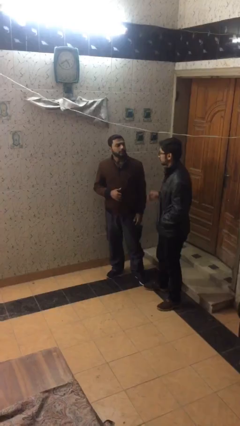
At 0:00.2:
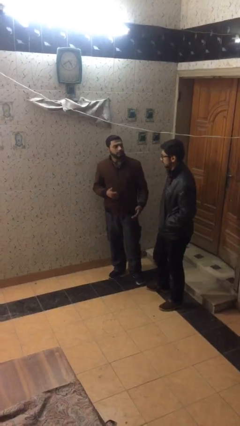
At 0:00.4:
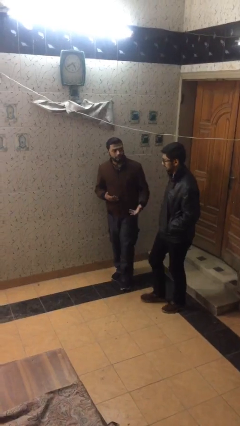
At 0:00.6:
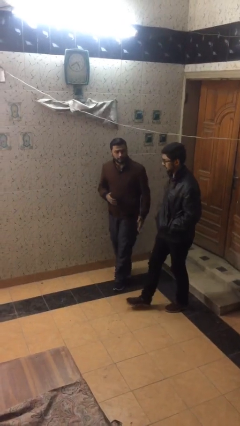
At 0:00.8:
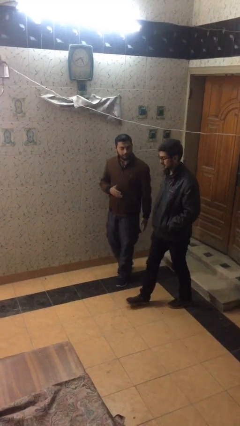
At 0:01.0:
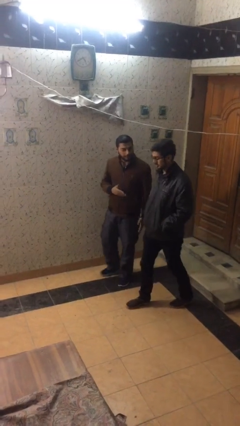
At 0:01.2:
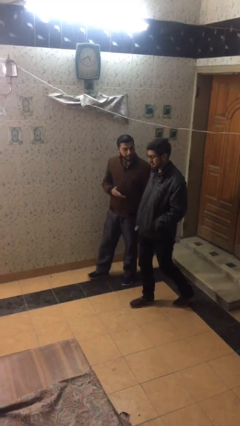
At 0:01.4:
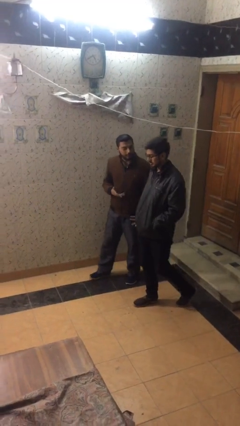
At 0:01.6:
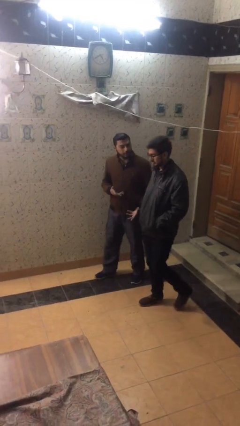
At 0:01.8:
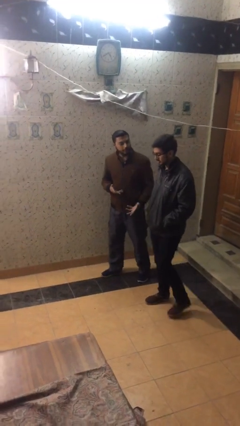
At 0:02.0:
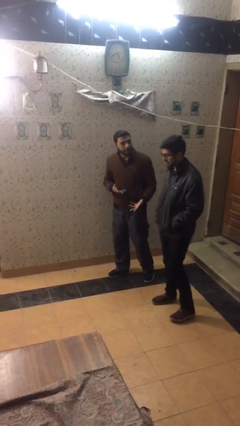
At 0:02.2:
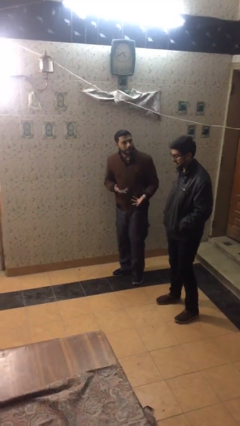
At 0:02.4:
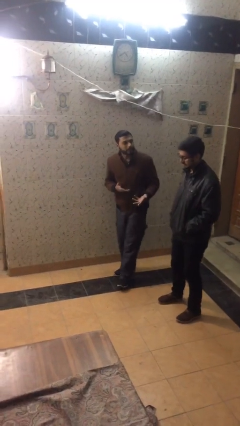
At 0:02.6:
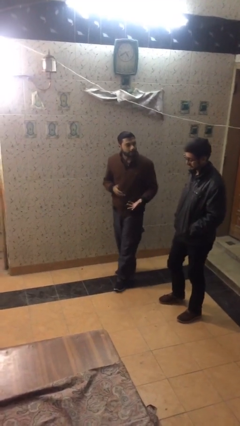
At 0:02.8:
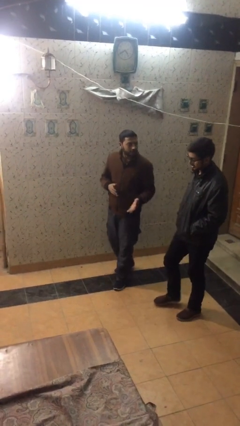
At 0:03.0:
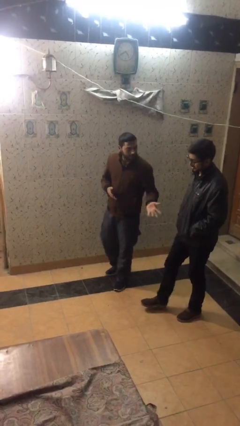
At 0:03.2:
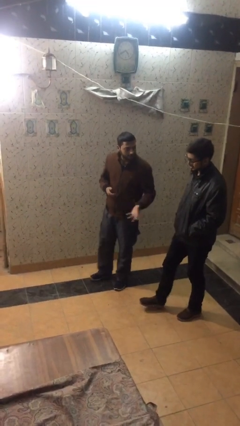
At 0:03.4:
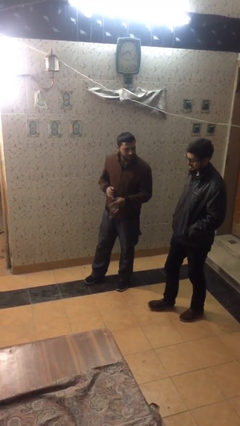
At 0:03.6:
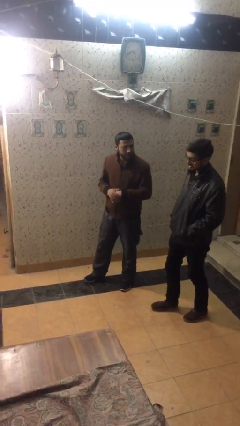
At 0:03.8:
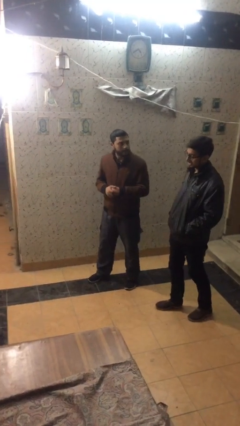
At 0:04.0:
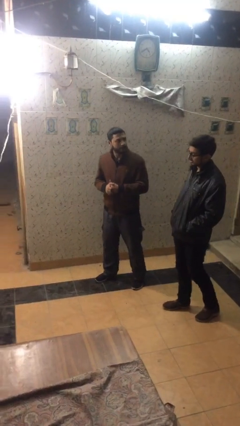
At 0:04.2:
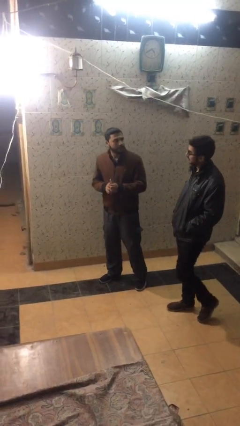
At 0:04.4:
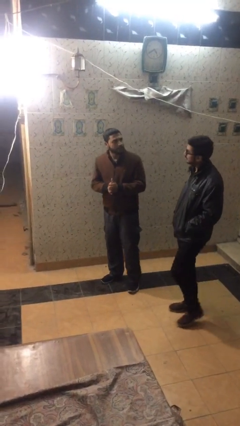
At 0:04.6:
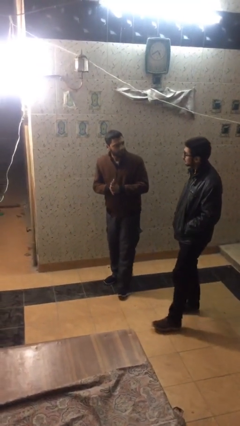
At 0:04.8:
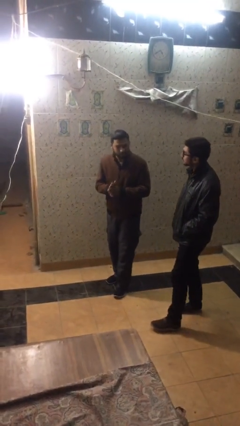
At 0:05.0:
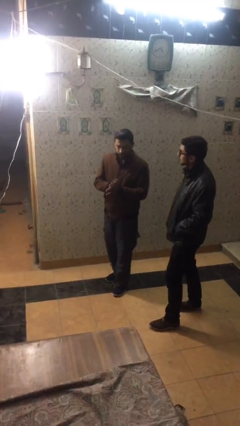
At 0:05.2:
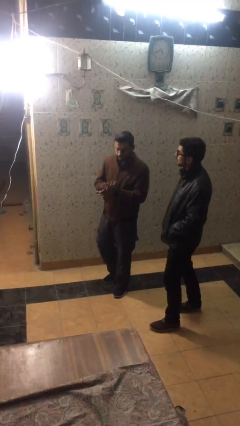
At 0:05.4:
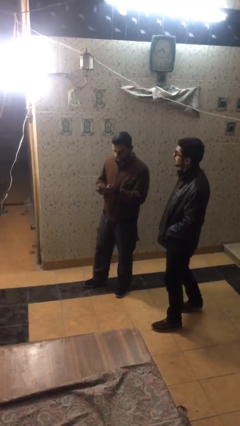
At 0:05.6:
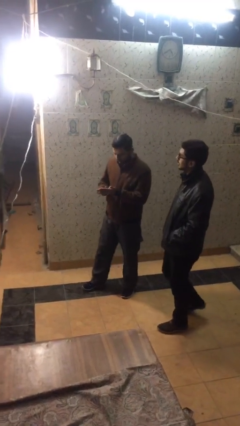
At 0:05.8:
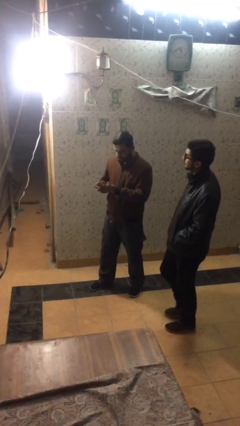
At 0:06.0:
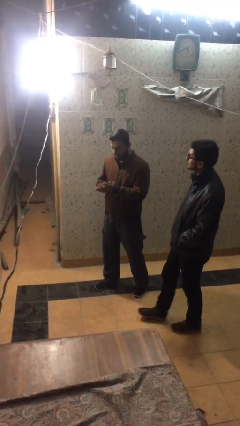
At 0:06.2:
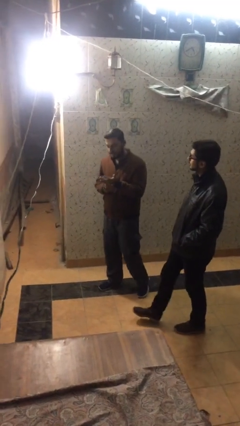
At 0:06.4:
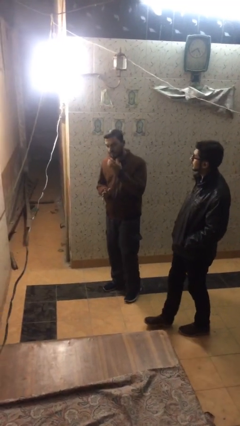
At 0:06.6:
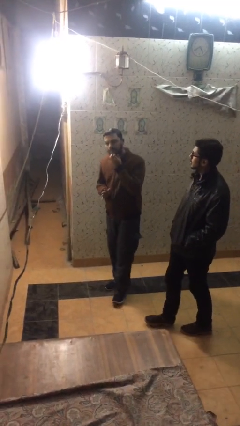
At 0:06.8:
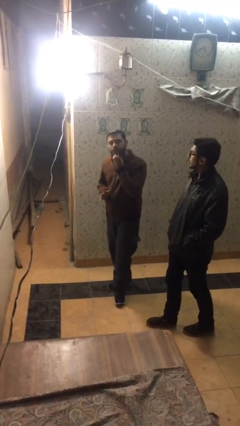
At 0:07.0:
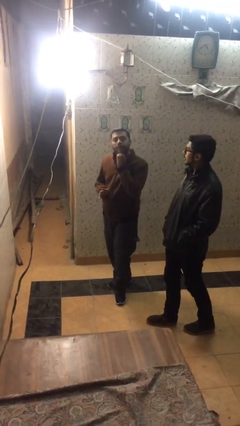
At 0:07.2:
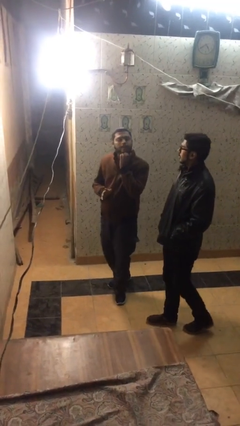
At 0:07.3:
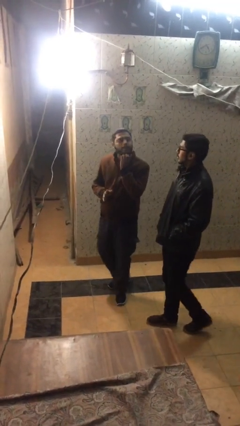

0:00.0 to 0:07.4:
person talks to person

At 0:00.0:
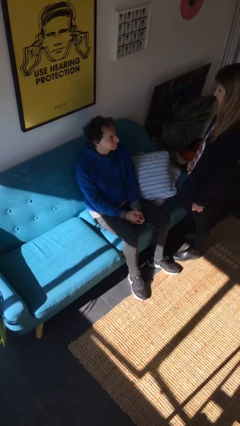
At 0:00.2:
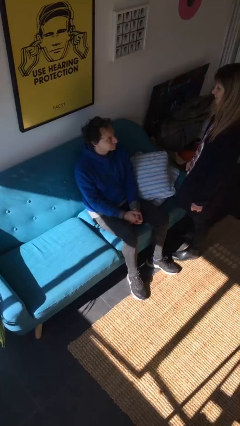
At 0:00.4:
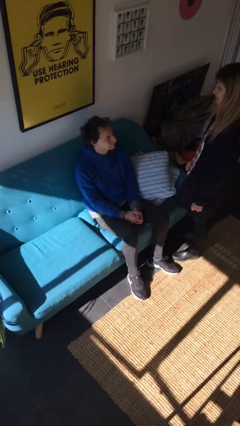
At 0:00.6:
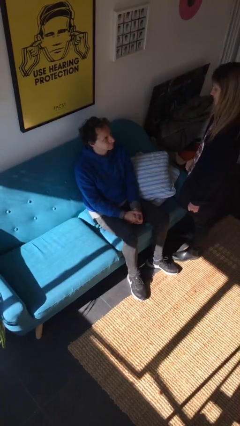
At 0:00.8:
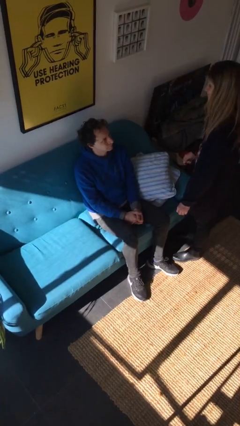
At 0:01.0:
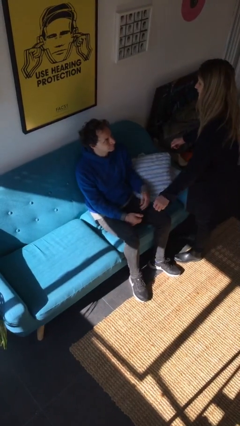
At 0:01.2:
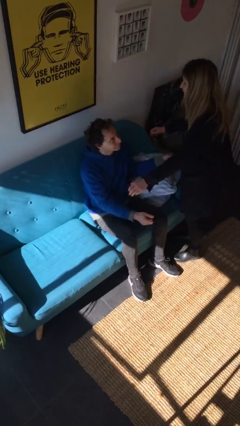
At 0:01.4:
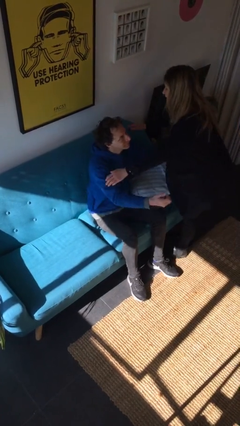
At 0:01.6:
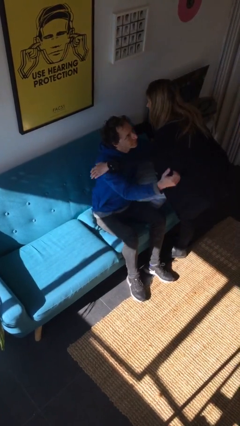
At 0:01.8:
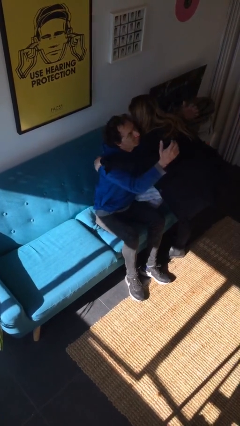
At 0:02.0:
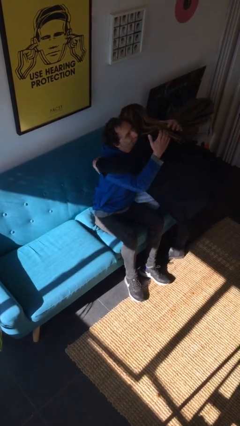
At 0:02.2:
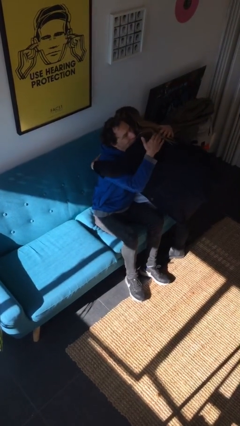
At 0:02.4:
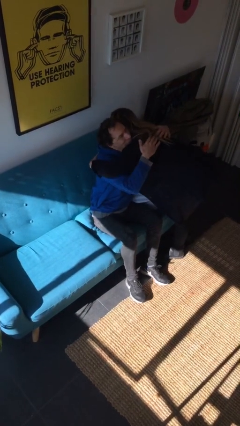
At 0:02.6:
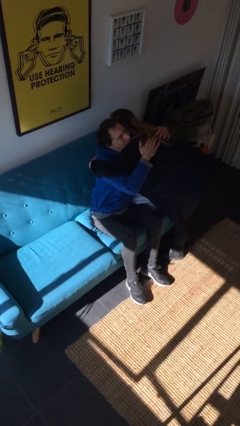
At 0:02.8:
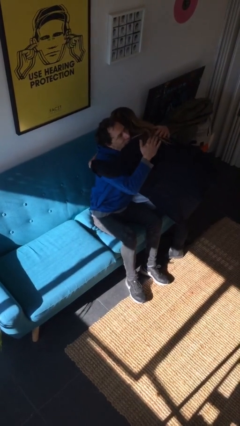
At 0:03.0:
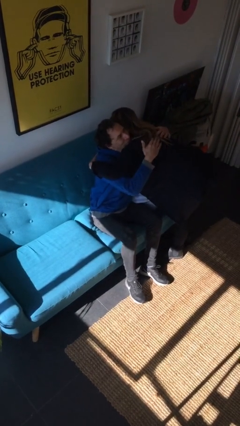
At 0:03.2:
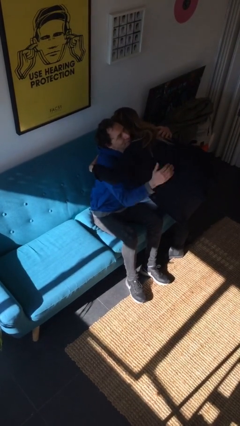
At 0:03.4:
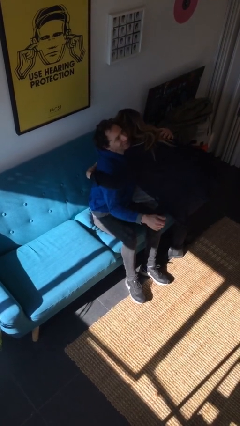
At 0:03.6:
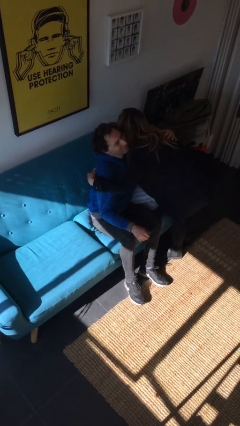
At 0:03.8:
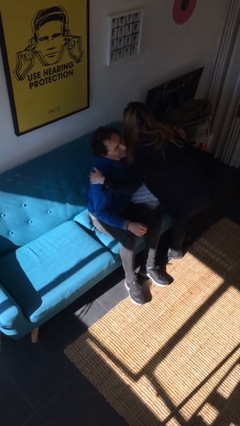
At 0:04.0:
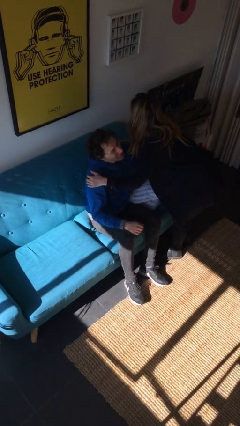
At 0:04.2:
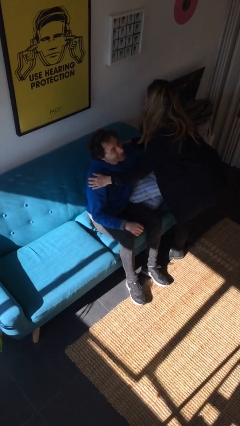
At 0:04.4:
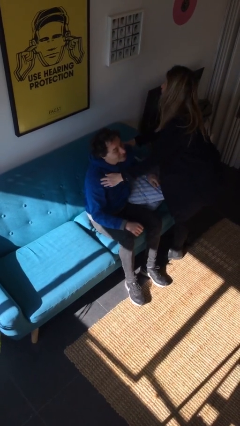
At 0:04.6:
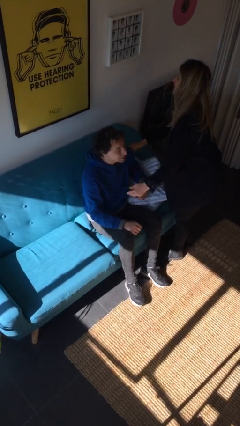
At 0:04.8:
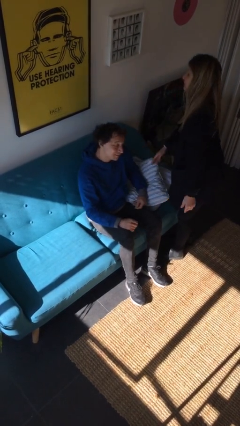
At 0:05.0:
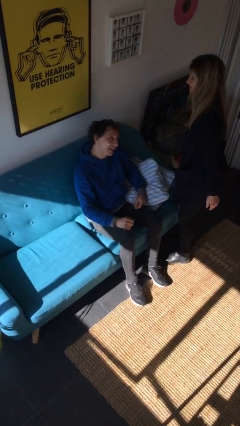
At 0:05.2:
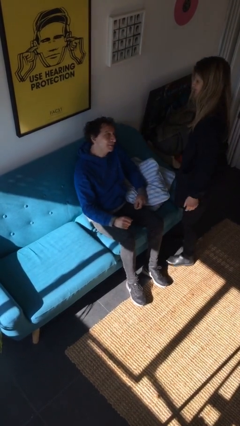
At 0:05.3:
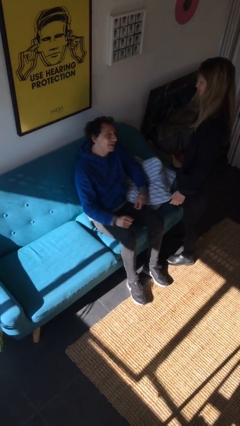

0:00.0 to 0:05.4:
person embraces person

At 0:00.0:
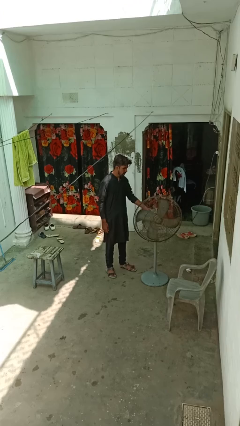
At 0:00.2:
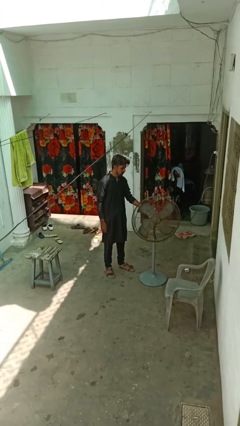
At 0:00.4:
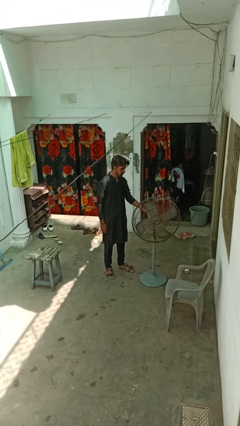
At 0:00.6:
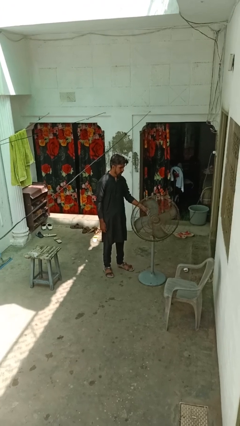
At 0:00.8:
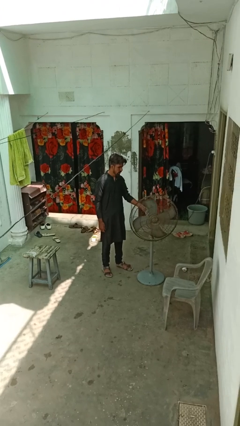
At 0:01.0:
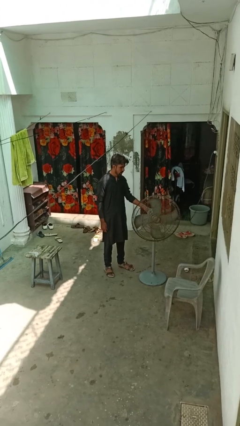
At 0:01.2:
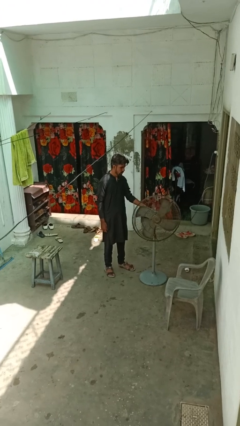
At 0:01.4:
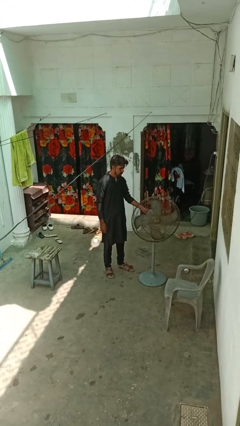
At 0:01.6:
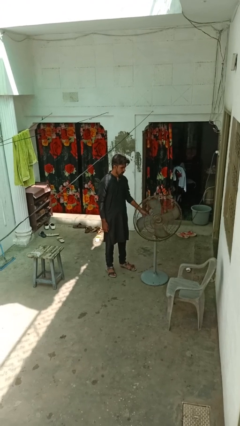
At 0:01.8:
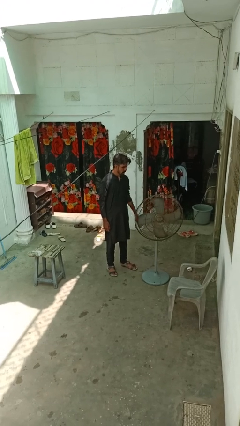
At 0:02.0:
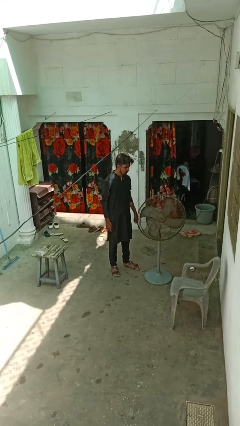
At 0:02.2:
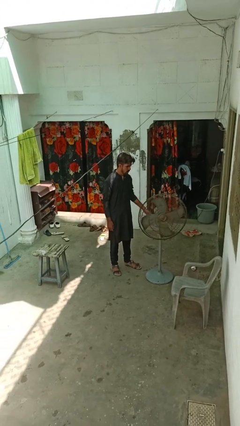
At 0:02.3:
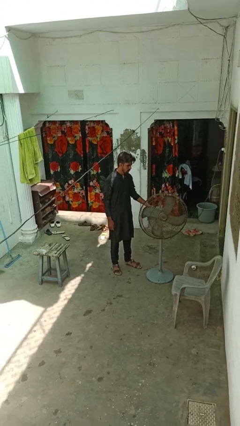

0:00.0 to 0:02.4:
person turns on fan

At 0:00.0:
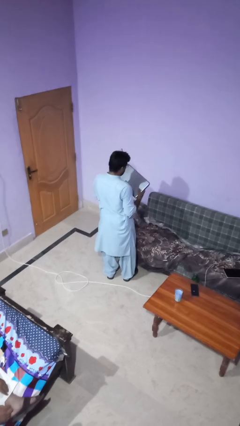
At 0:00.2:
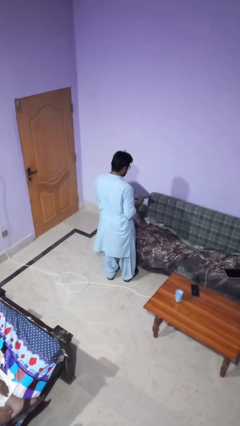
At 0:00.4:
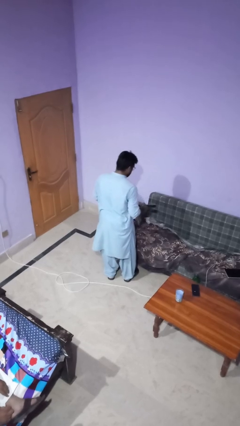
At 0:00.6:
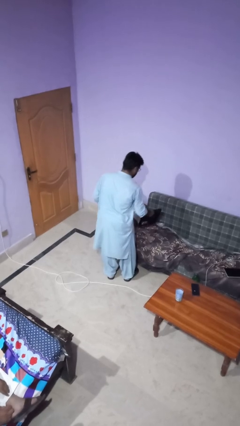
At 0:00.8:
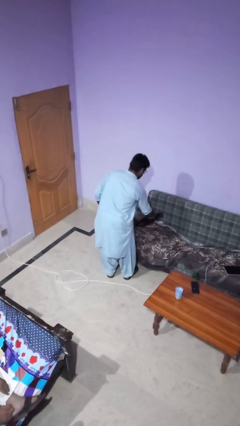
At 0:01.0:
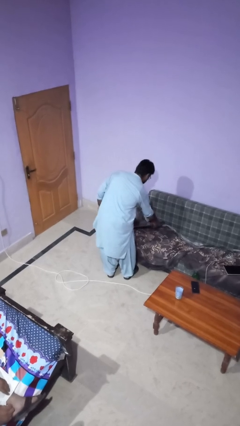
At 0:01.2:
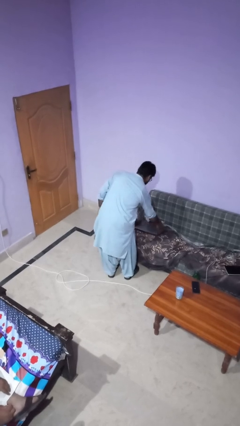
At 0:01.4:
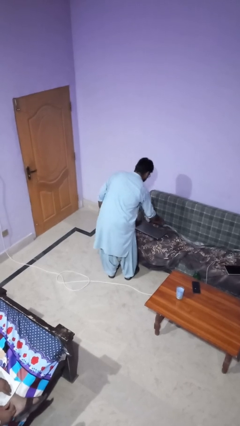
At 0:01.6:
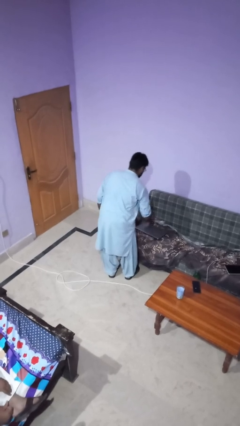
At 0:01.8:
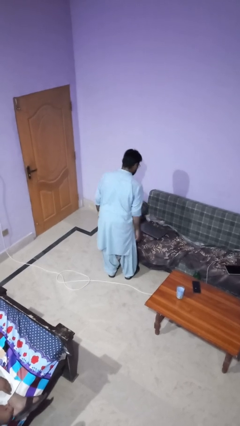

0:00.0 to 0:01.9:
person puts down object on couch

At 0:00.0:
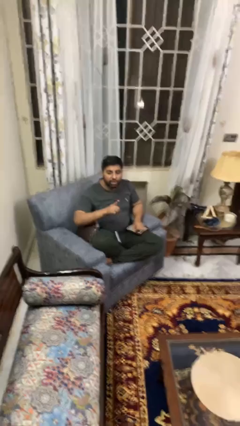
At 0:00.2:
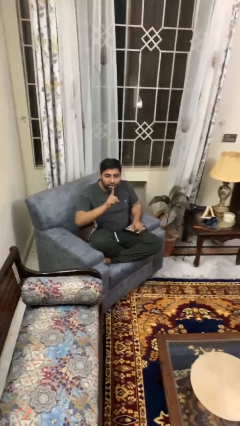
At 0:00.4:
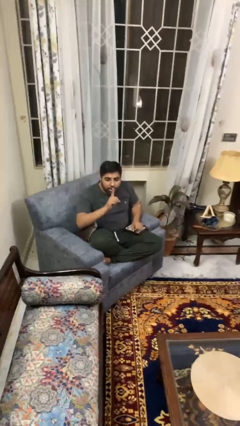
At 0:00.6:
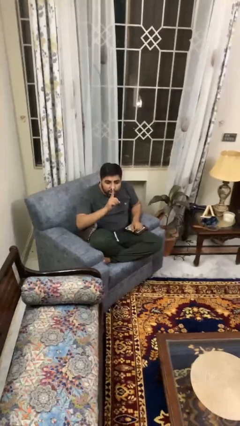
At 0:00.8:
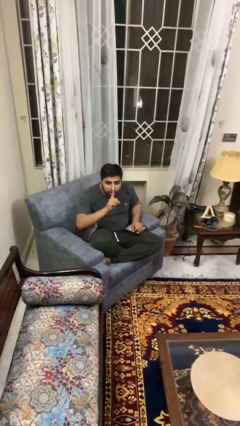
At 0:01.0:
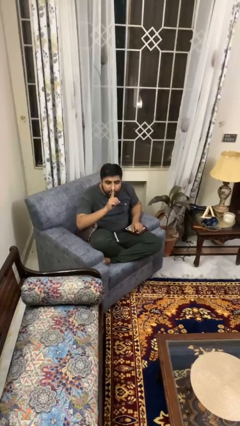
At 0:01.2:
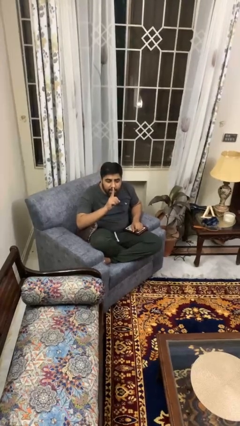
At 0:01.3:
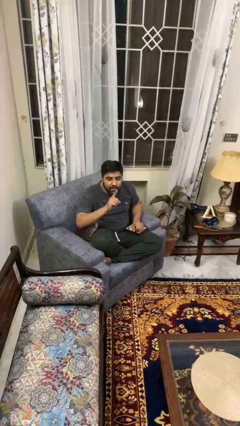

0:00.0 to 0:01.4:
person gestures be quiet
